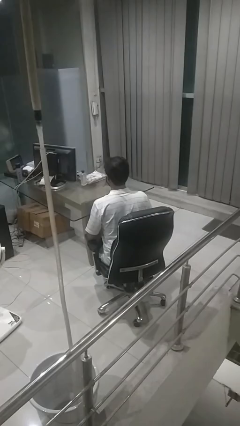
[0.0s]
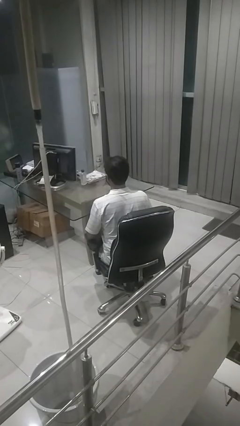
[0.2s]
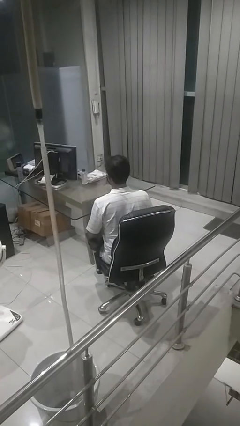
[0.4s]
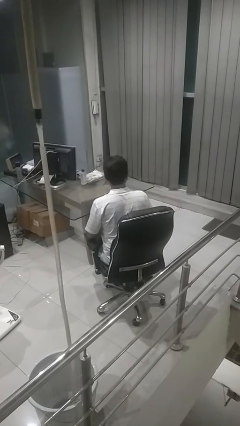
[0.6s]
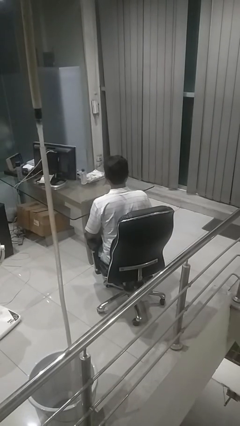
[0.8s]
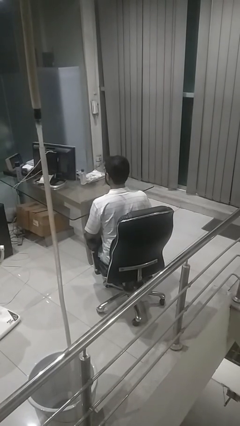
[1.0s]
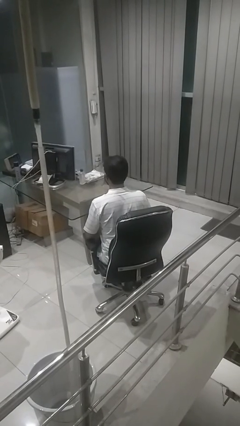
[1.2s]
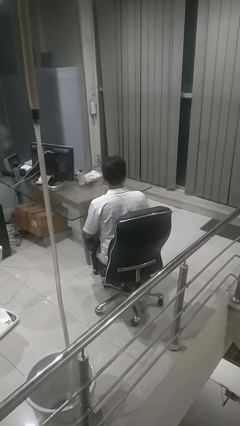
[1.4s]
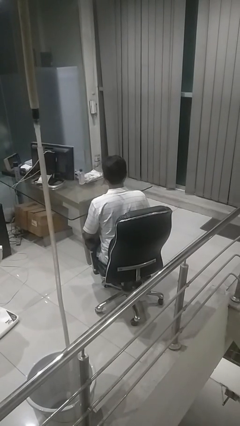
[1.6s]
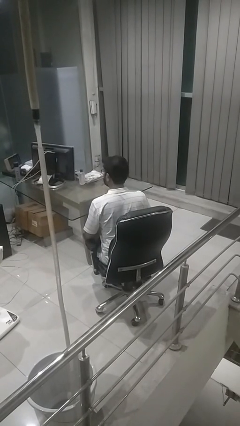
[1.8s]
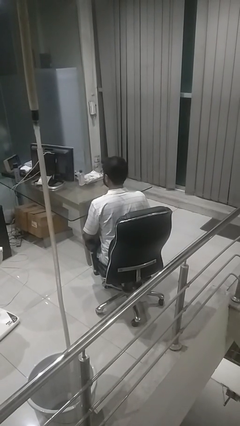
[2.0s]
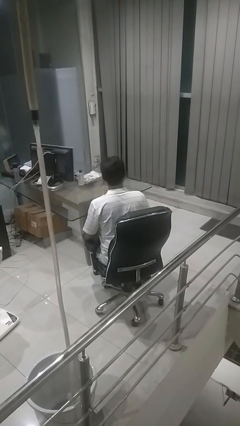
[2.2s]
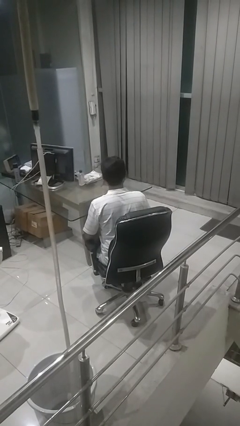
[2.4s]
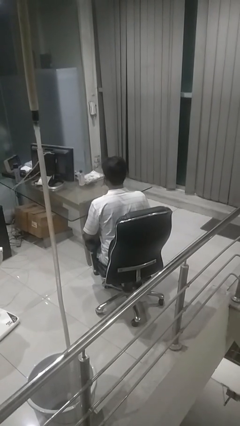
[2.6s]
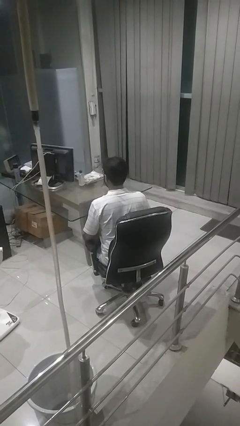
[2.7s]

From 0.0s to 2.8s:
person shakes head

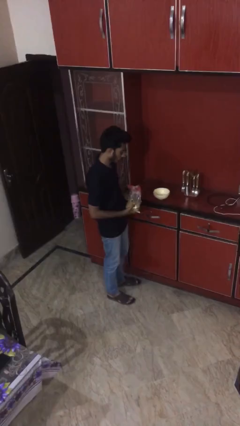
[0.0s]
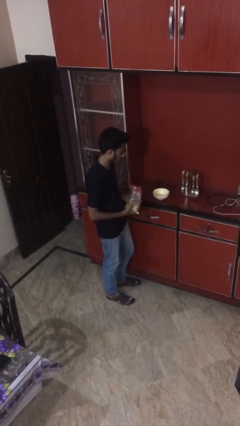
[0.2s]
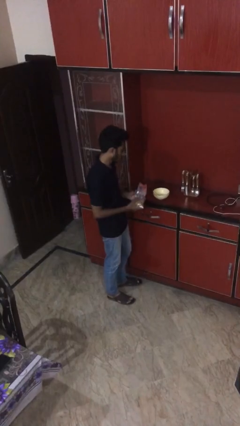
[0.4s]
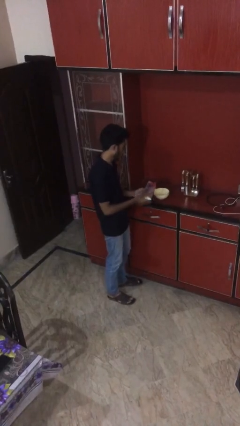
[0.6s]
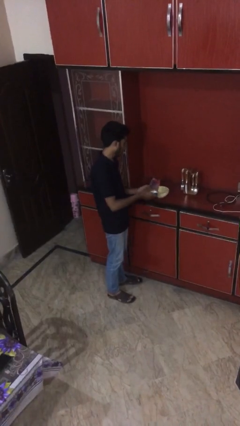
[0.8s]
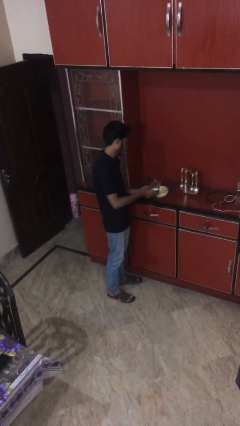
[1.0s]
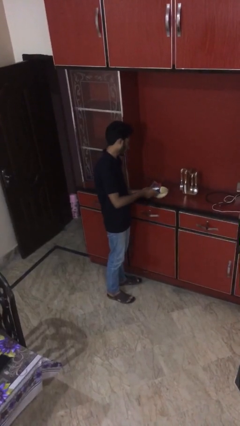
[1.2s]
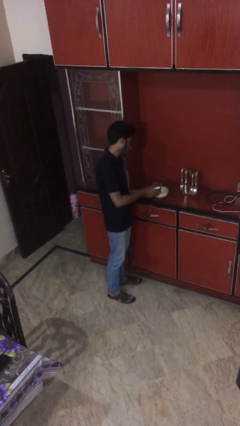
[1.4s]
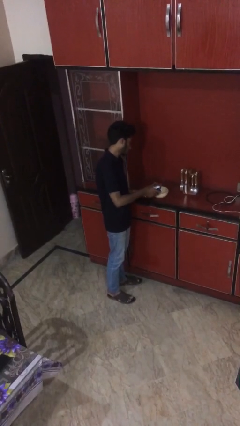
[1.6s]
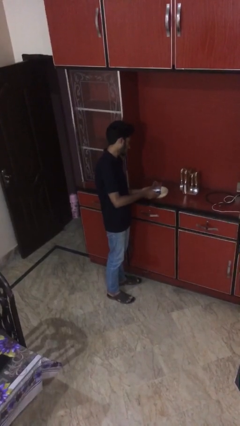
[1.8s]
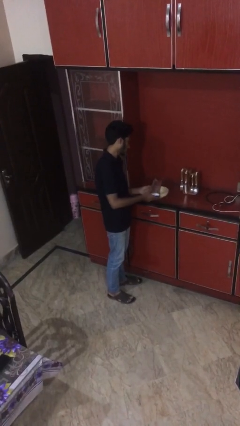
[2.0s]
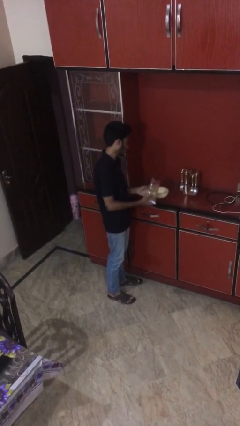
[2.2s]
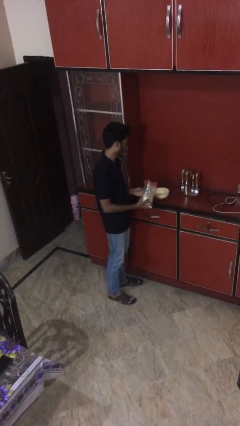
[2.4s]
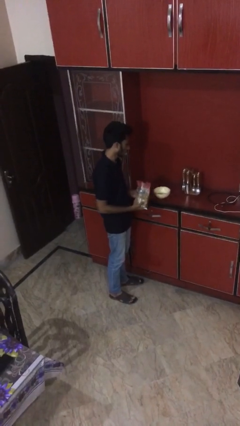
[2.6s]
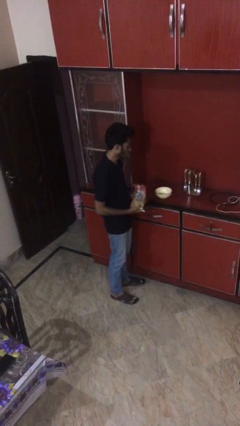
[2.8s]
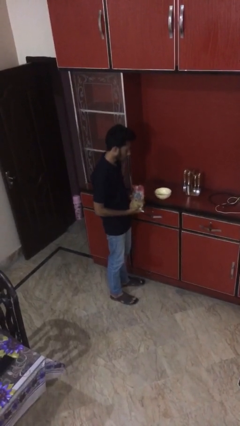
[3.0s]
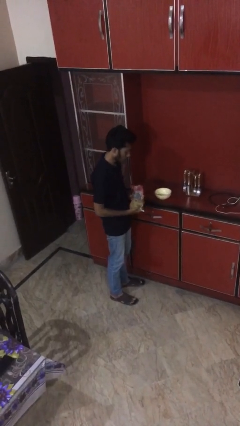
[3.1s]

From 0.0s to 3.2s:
person pours into bowl

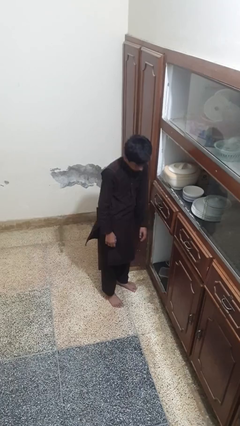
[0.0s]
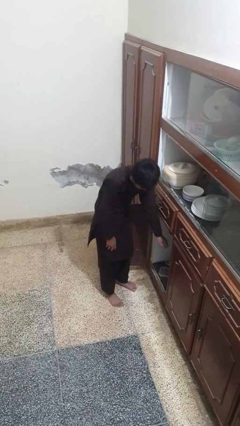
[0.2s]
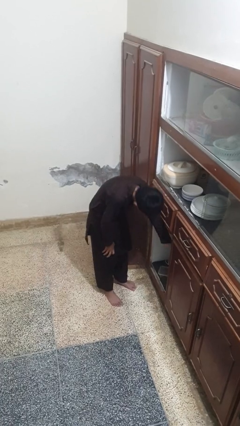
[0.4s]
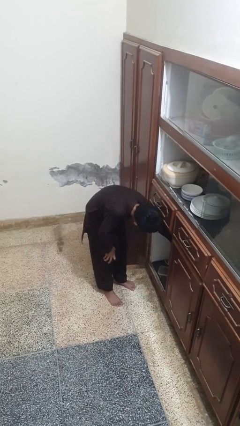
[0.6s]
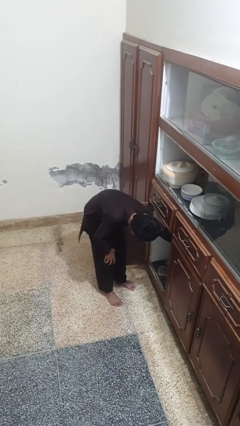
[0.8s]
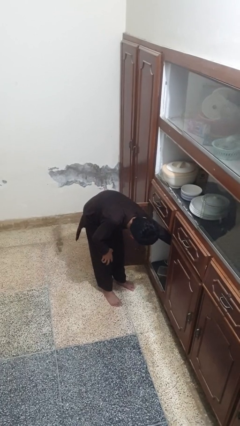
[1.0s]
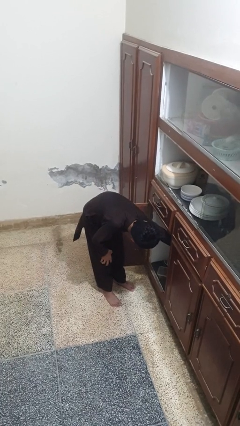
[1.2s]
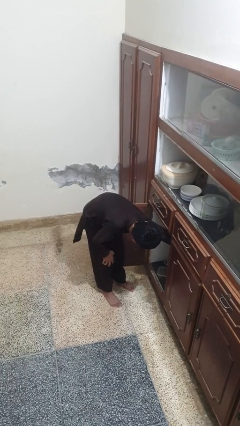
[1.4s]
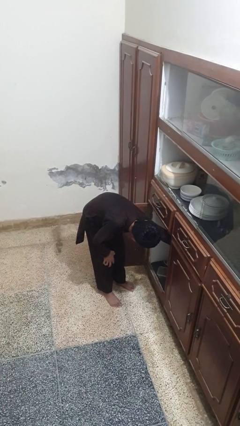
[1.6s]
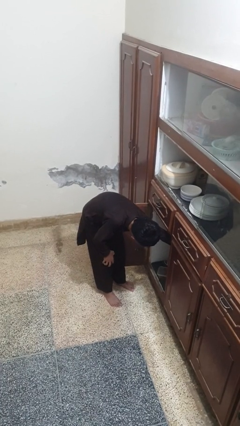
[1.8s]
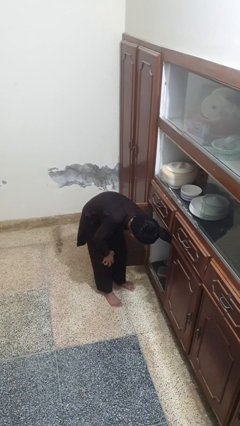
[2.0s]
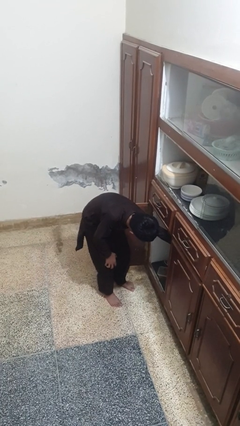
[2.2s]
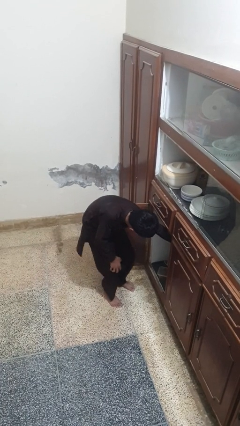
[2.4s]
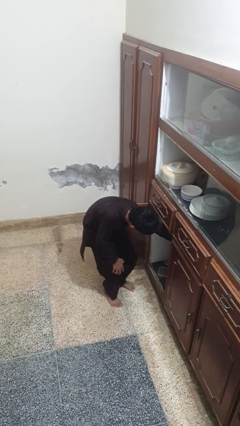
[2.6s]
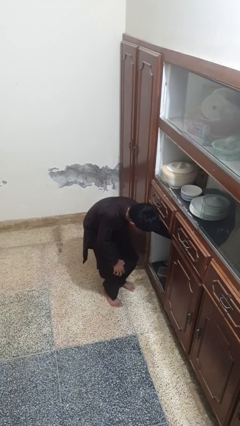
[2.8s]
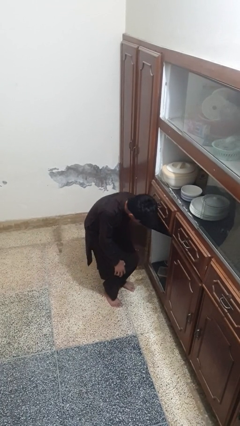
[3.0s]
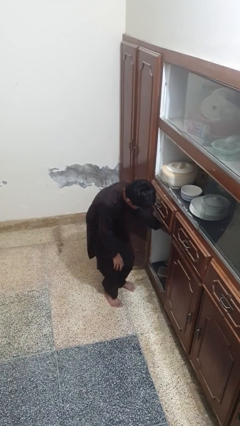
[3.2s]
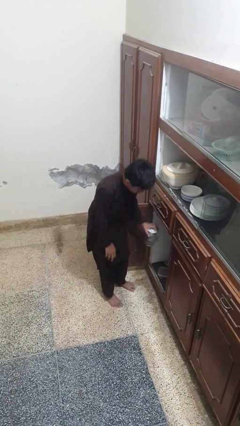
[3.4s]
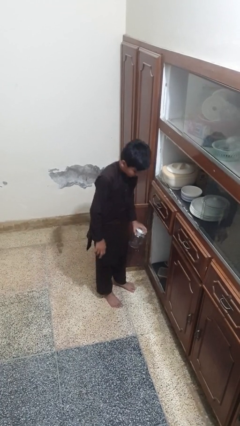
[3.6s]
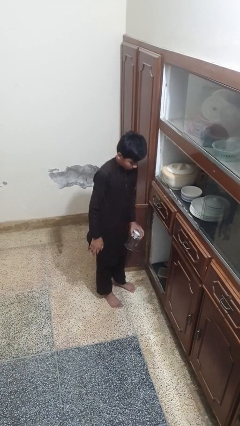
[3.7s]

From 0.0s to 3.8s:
person takes object from cabinet

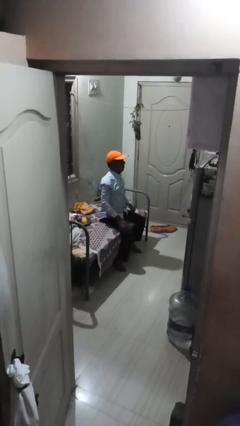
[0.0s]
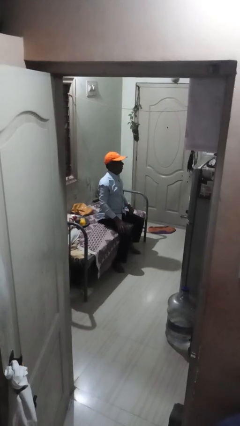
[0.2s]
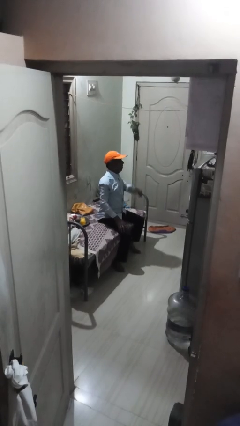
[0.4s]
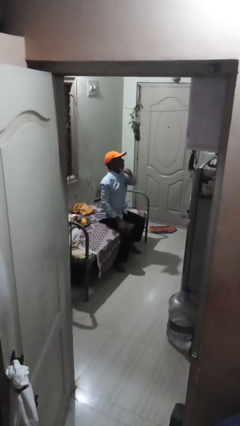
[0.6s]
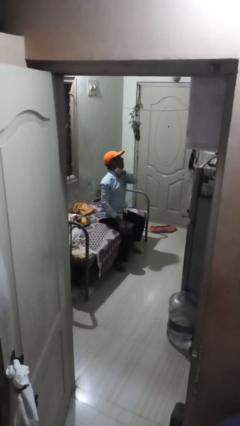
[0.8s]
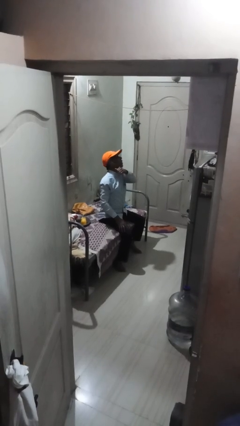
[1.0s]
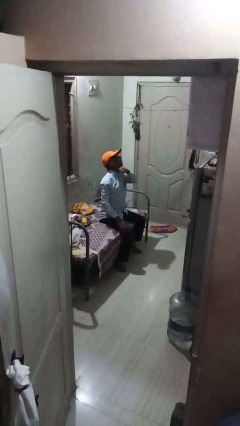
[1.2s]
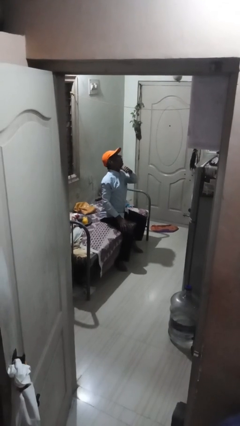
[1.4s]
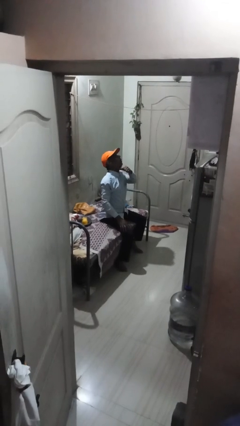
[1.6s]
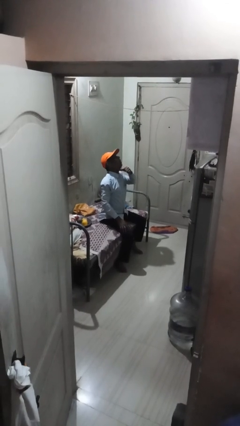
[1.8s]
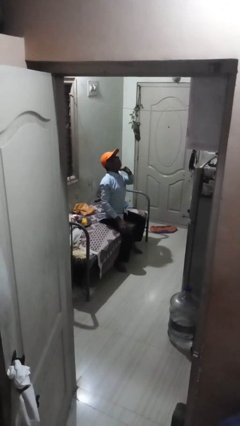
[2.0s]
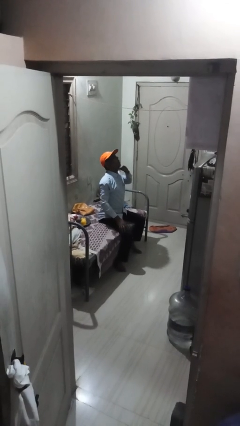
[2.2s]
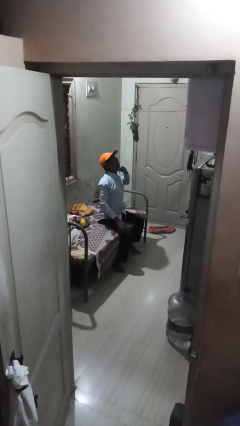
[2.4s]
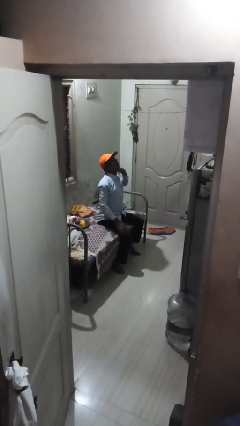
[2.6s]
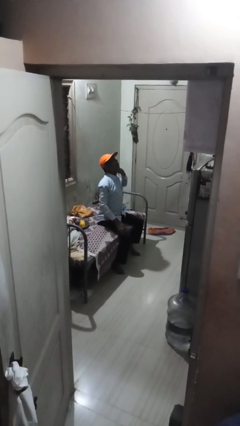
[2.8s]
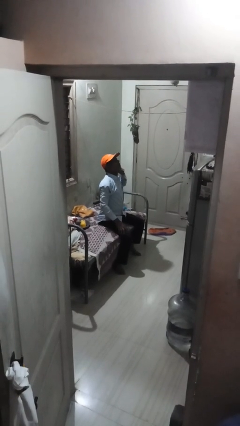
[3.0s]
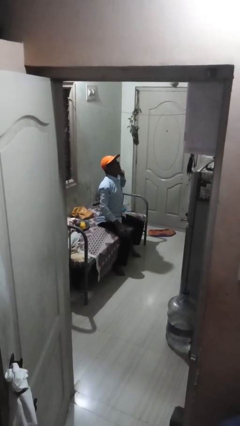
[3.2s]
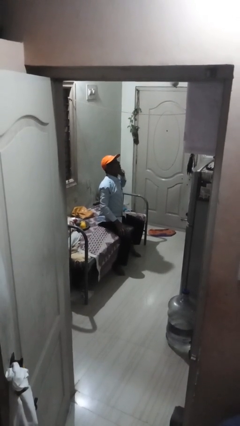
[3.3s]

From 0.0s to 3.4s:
person gestures cut

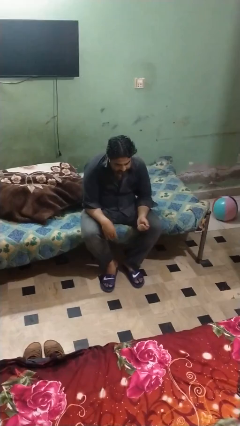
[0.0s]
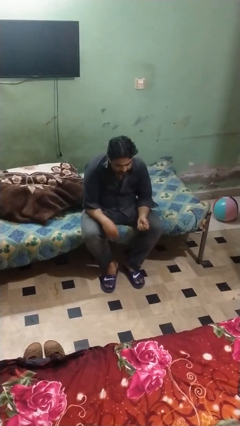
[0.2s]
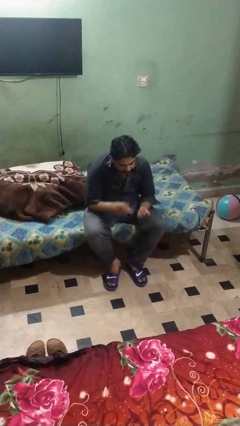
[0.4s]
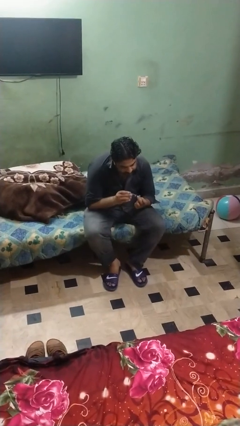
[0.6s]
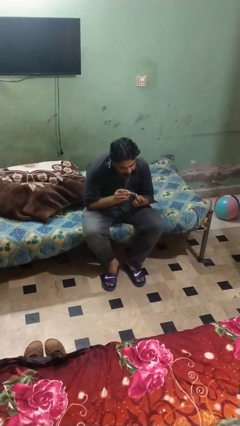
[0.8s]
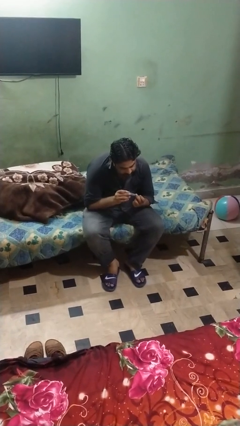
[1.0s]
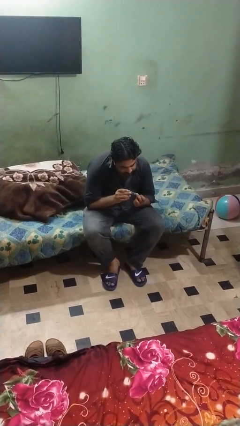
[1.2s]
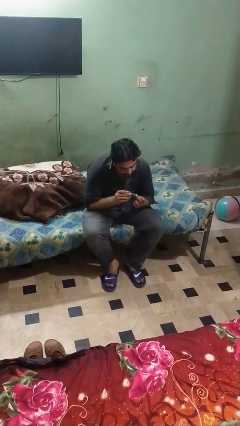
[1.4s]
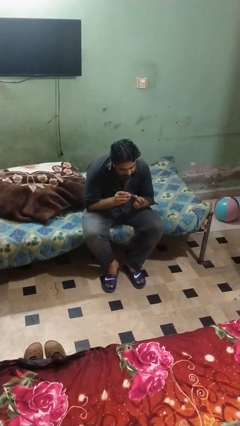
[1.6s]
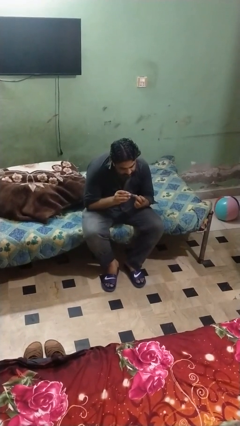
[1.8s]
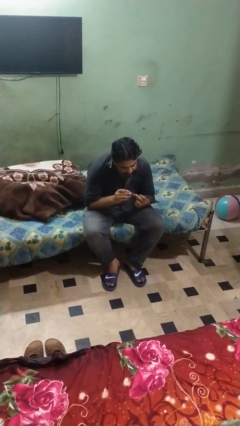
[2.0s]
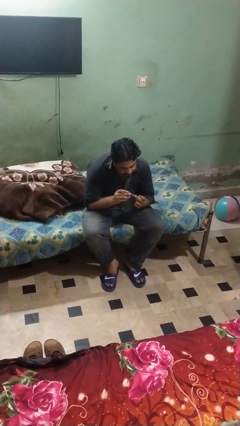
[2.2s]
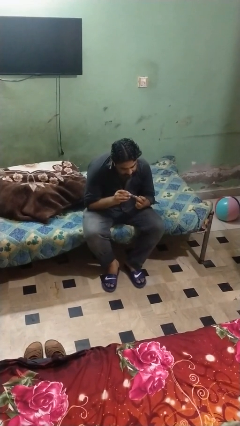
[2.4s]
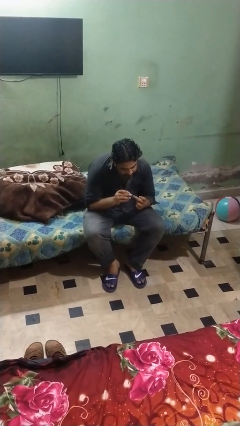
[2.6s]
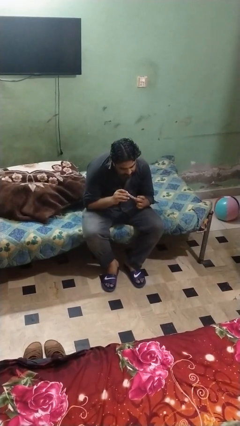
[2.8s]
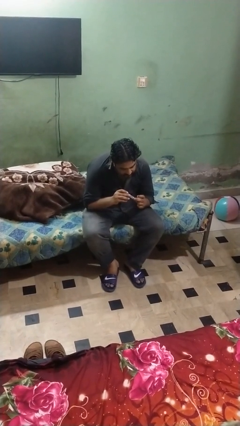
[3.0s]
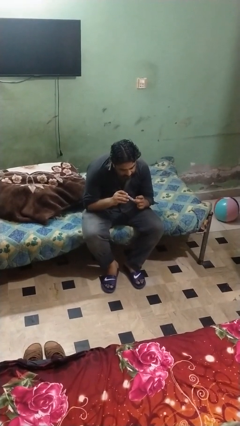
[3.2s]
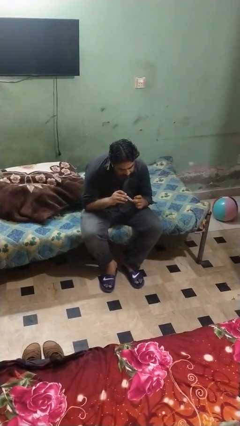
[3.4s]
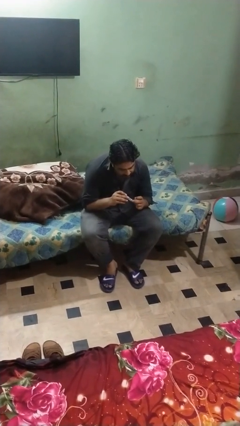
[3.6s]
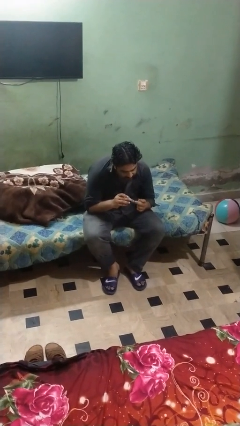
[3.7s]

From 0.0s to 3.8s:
person clips fingernails
